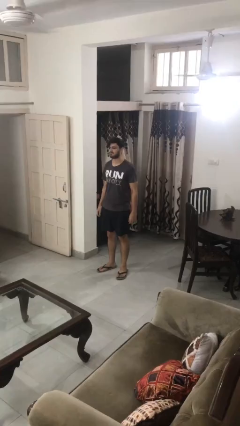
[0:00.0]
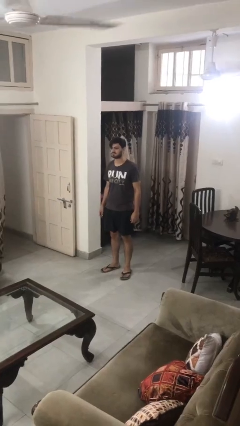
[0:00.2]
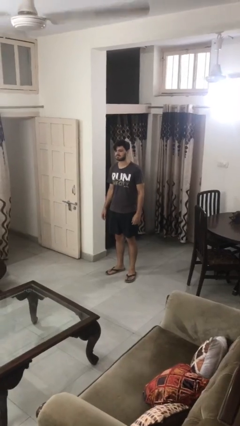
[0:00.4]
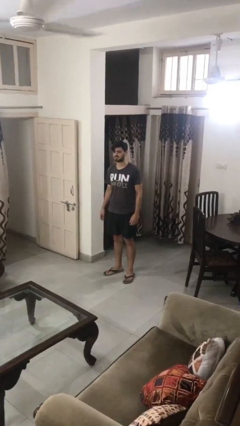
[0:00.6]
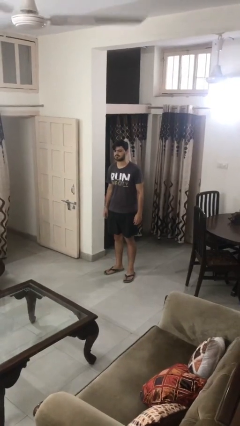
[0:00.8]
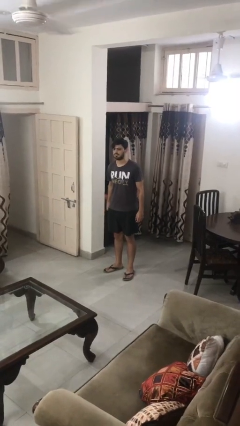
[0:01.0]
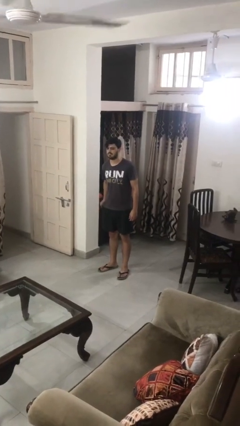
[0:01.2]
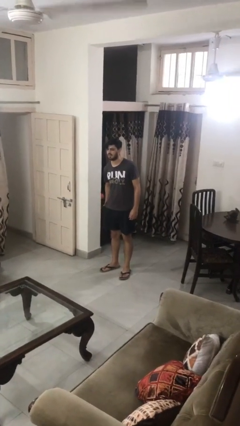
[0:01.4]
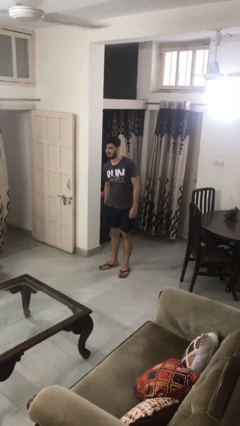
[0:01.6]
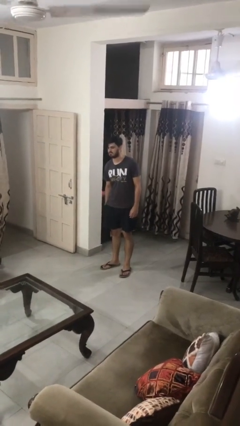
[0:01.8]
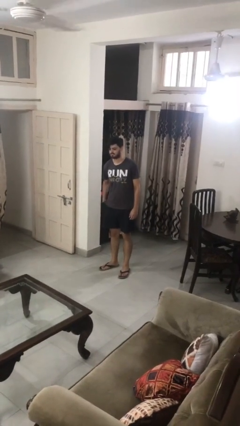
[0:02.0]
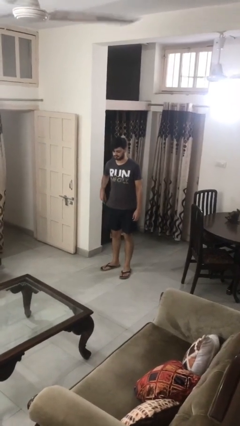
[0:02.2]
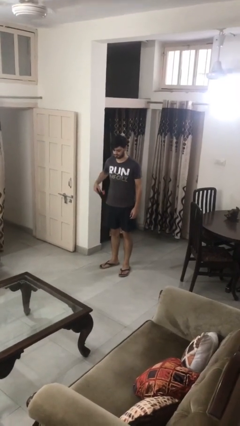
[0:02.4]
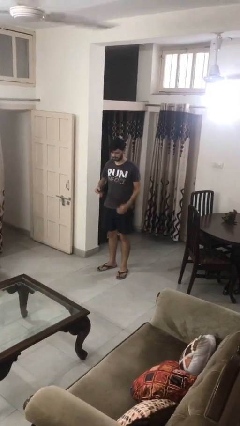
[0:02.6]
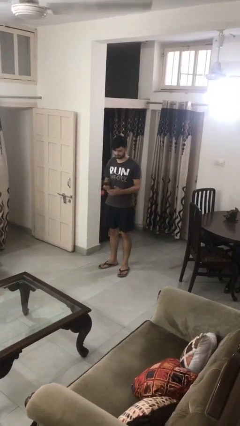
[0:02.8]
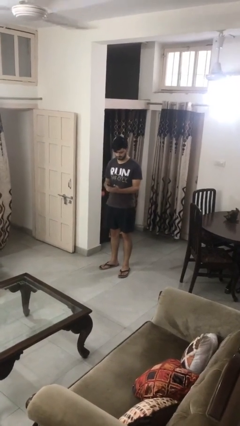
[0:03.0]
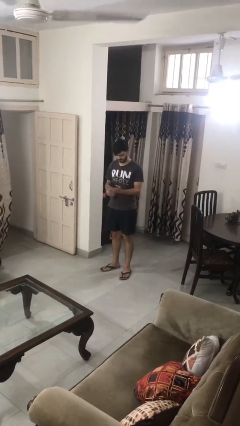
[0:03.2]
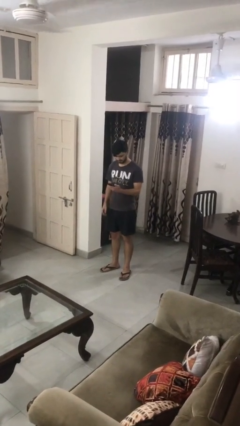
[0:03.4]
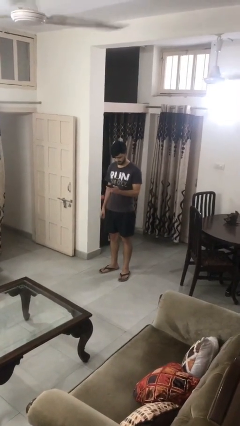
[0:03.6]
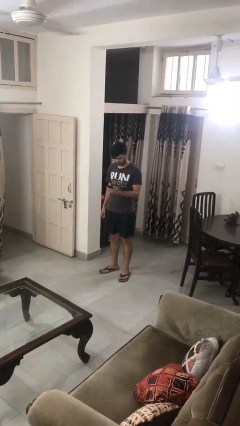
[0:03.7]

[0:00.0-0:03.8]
person takes phone from pocket

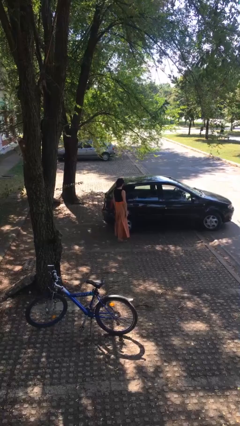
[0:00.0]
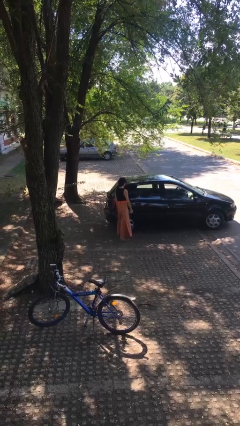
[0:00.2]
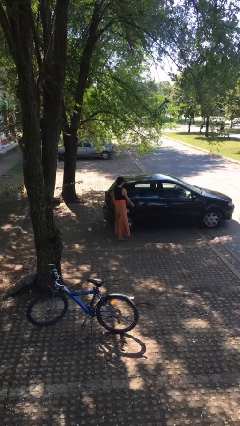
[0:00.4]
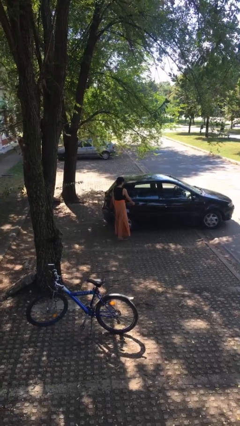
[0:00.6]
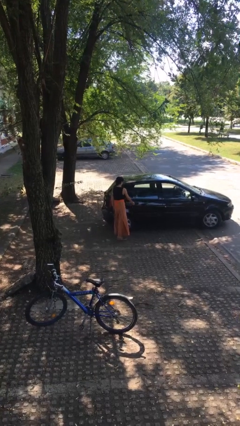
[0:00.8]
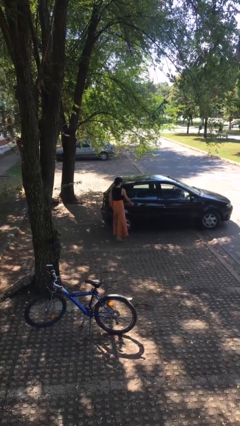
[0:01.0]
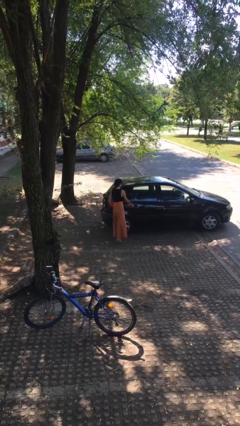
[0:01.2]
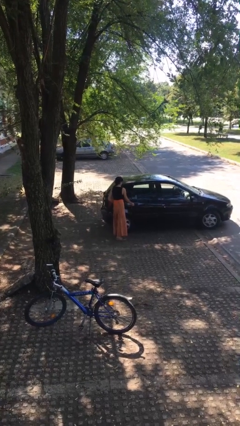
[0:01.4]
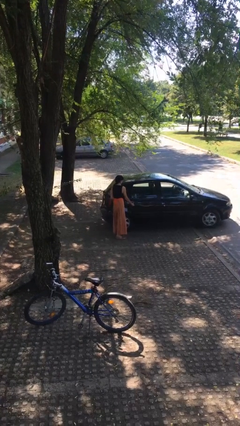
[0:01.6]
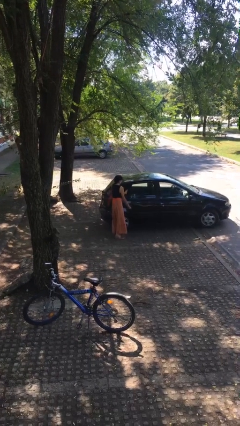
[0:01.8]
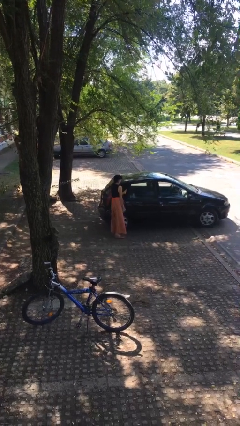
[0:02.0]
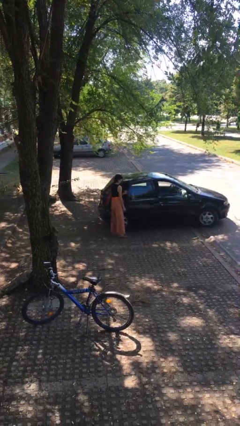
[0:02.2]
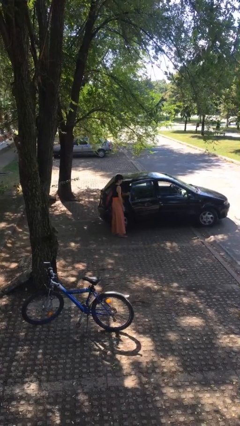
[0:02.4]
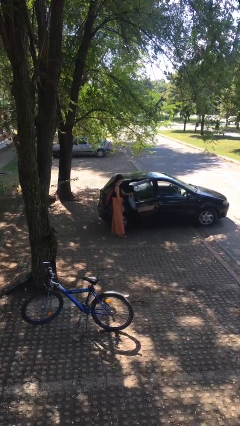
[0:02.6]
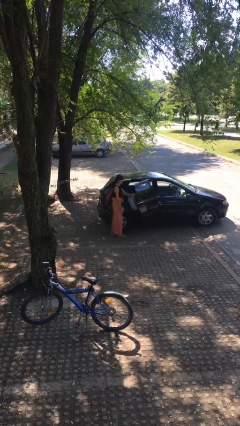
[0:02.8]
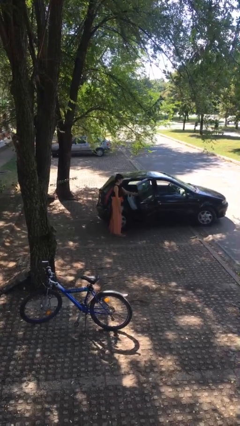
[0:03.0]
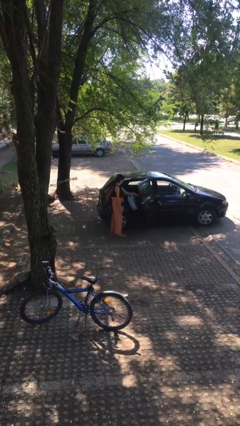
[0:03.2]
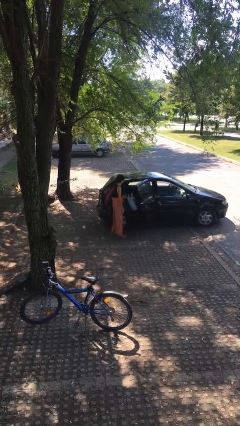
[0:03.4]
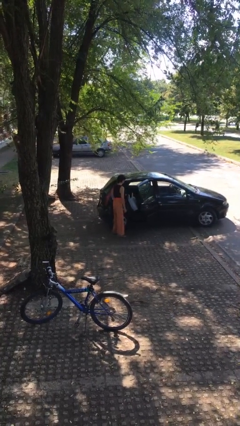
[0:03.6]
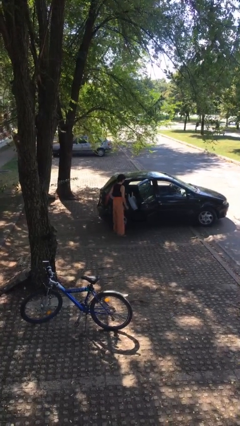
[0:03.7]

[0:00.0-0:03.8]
person opens car door

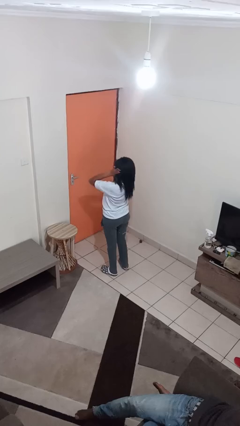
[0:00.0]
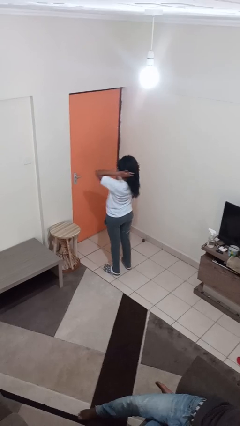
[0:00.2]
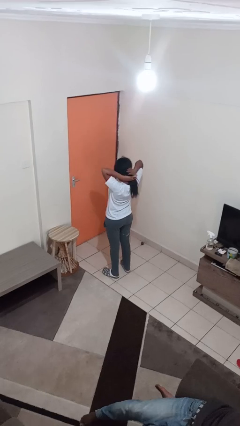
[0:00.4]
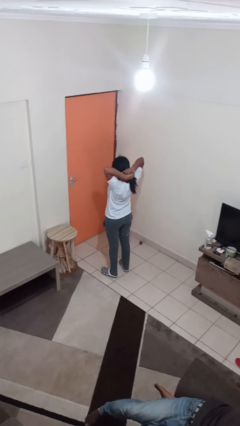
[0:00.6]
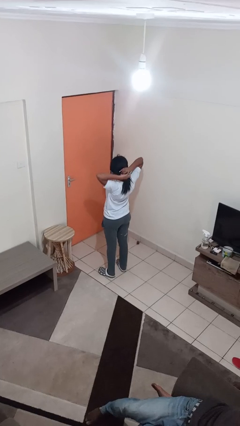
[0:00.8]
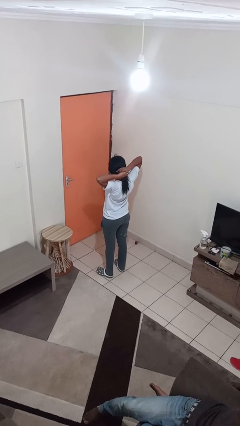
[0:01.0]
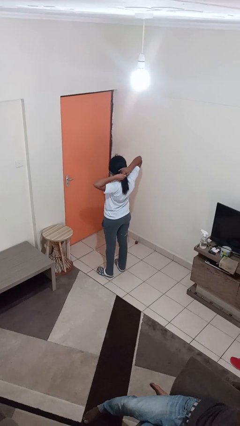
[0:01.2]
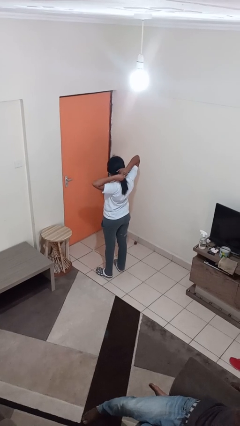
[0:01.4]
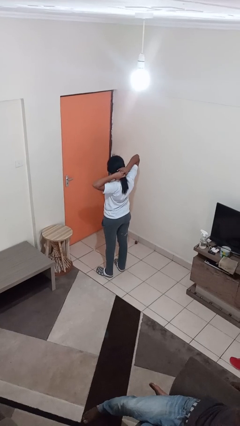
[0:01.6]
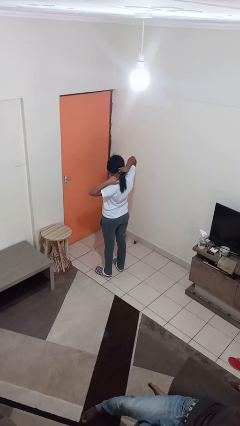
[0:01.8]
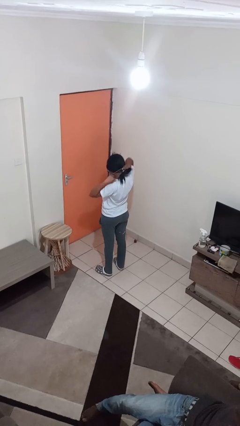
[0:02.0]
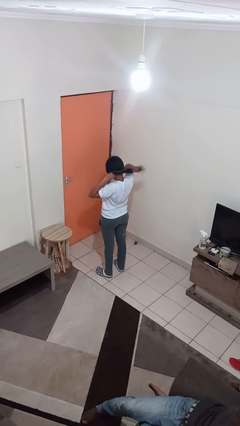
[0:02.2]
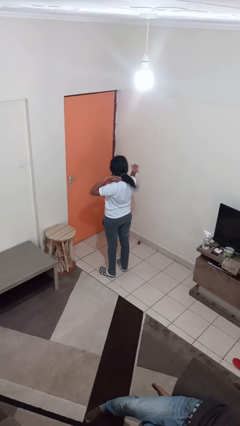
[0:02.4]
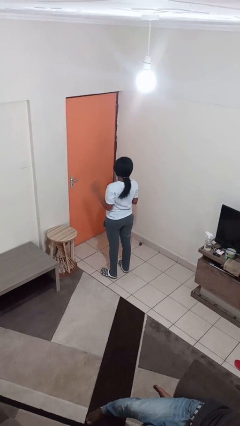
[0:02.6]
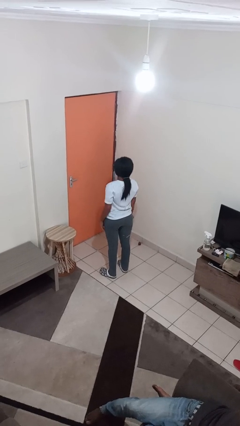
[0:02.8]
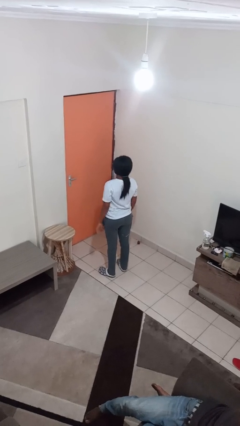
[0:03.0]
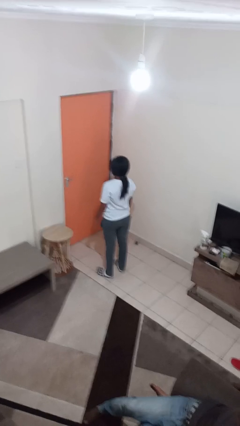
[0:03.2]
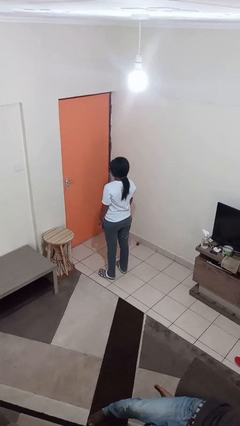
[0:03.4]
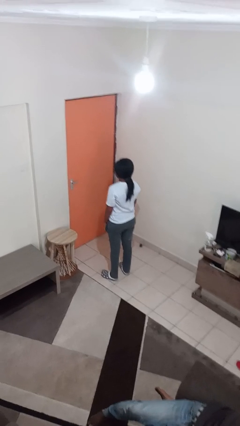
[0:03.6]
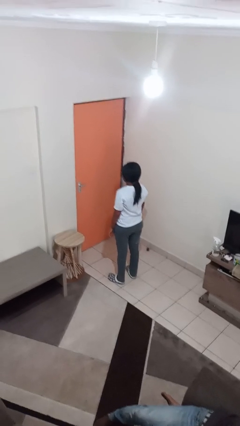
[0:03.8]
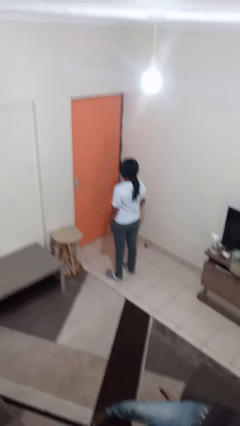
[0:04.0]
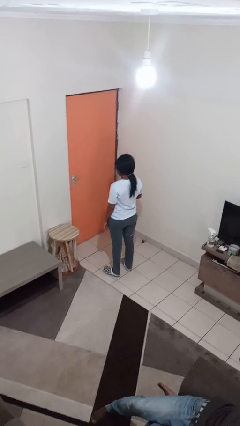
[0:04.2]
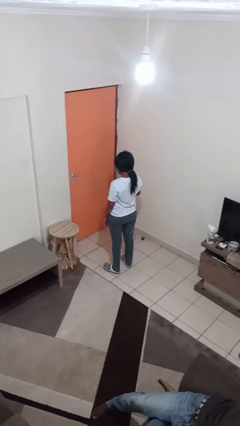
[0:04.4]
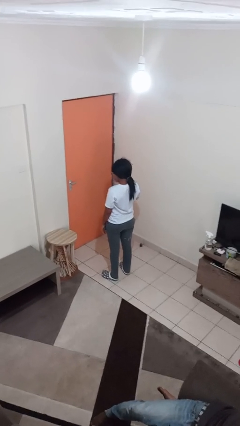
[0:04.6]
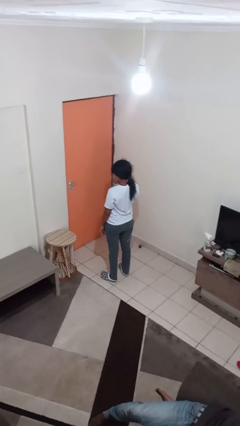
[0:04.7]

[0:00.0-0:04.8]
person puts hair in ponytail

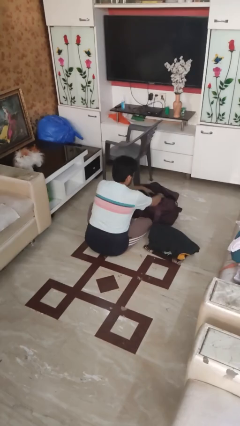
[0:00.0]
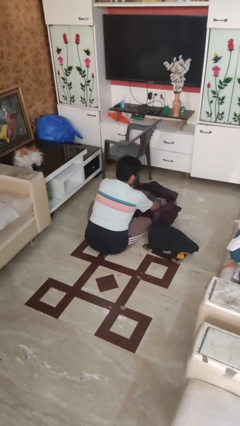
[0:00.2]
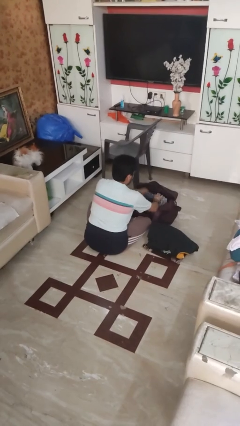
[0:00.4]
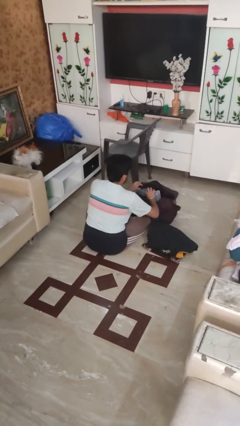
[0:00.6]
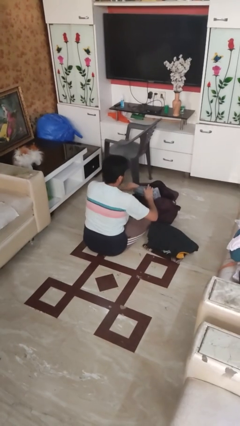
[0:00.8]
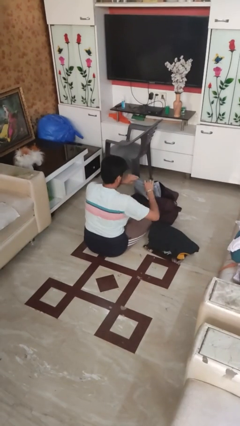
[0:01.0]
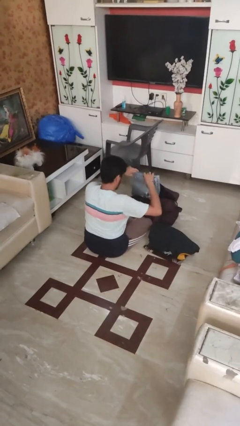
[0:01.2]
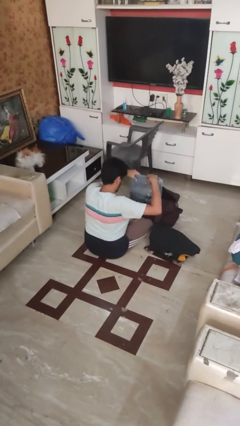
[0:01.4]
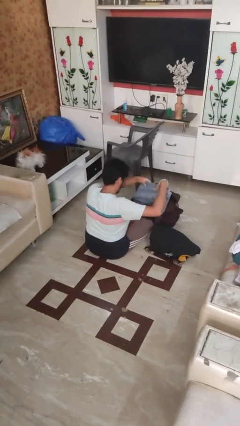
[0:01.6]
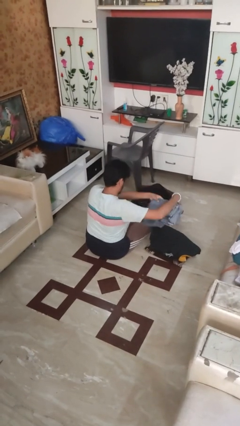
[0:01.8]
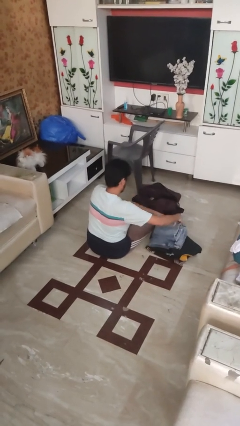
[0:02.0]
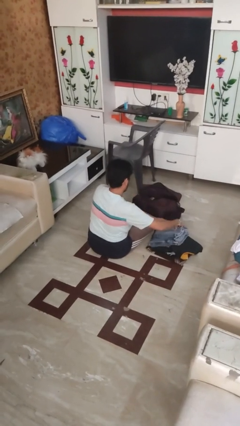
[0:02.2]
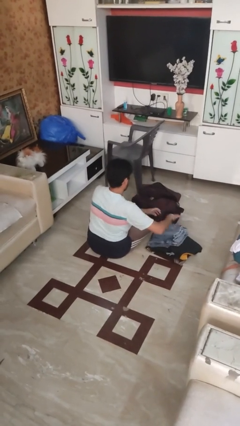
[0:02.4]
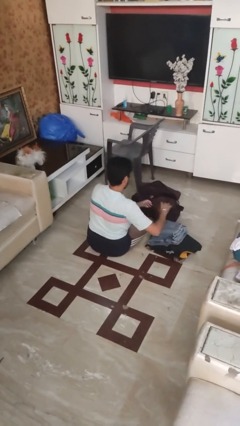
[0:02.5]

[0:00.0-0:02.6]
person unloads clothes from suitcase

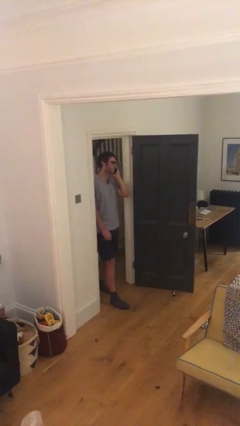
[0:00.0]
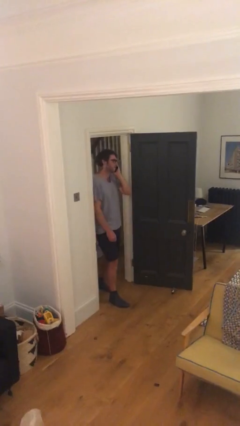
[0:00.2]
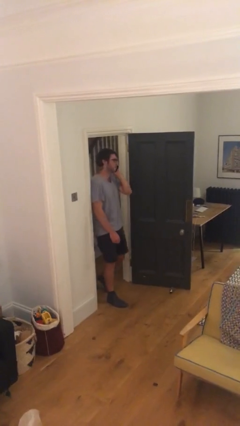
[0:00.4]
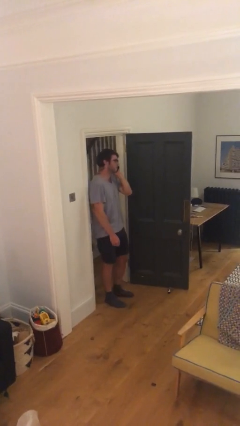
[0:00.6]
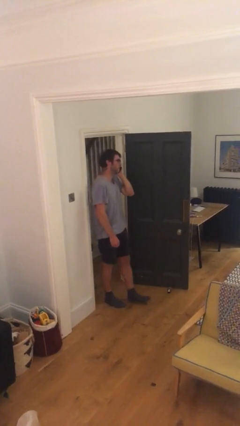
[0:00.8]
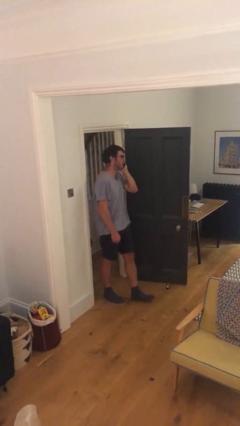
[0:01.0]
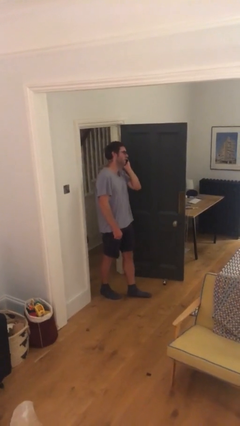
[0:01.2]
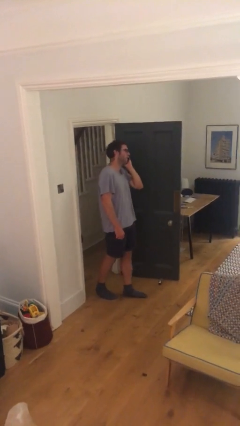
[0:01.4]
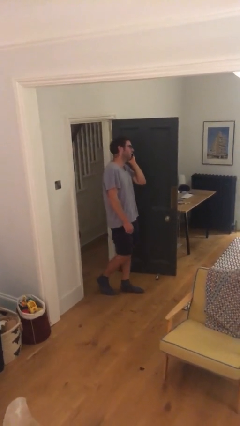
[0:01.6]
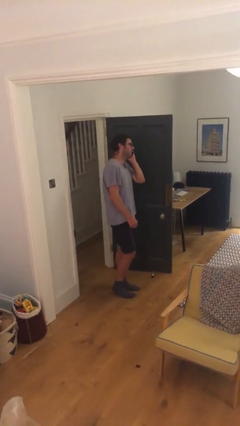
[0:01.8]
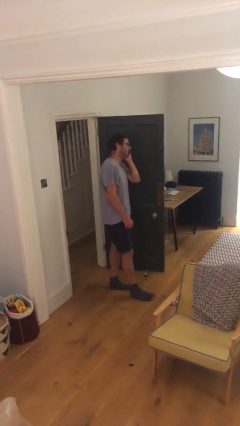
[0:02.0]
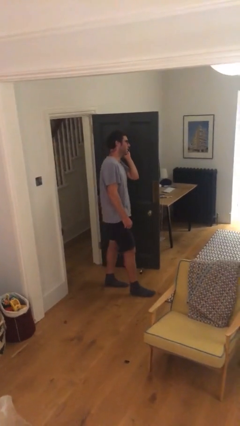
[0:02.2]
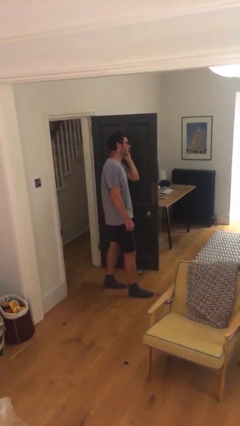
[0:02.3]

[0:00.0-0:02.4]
person enters scene through structure
